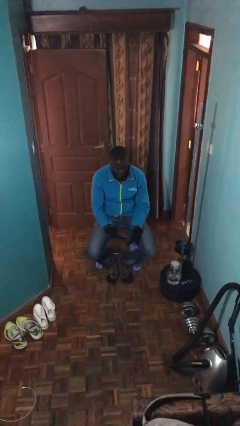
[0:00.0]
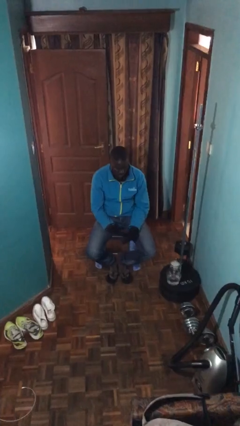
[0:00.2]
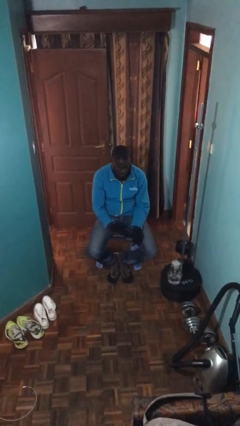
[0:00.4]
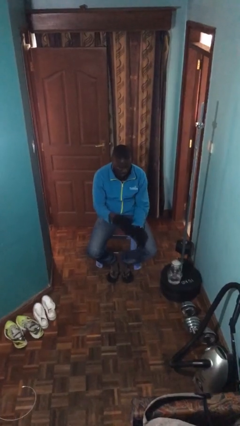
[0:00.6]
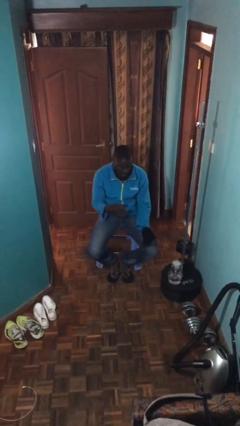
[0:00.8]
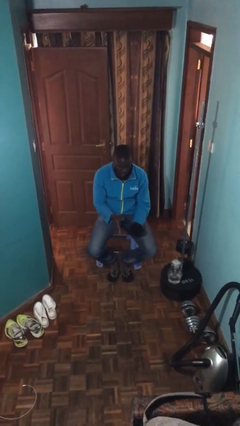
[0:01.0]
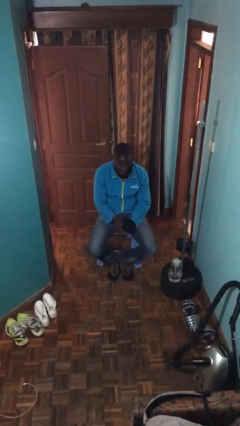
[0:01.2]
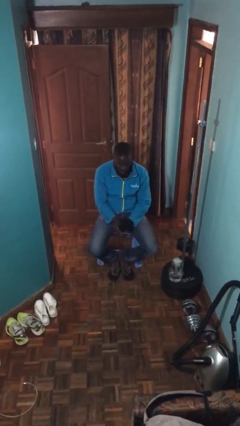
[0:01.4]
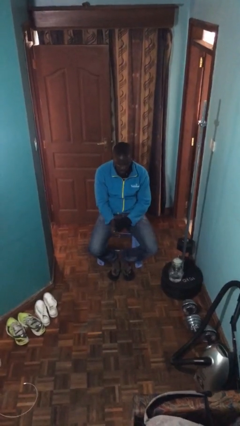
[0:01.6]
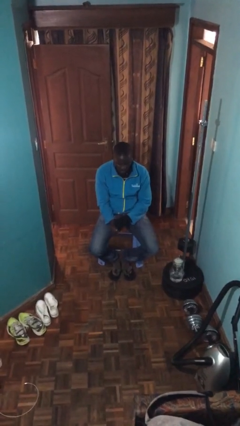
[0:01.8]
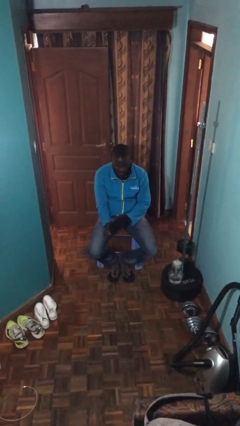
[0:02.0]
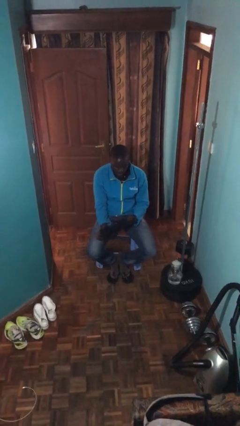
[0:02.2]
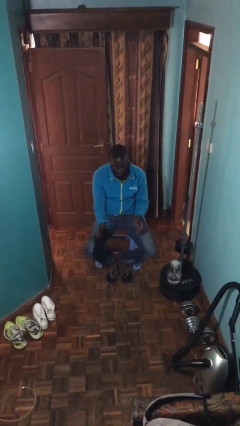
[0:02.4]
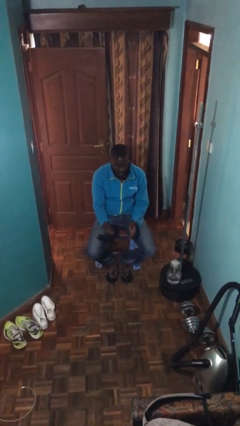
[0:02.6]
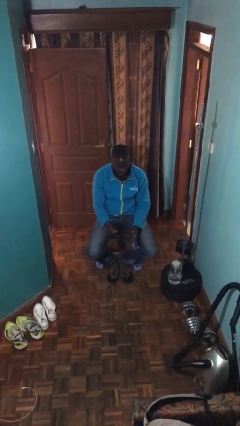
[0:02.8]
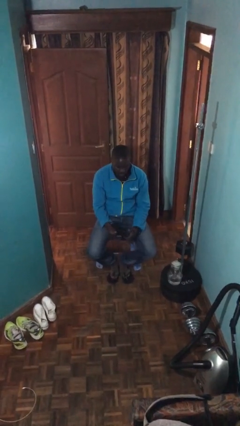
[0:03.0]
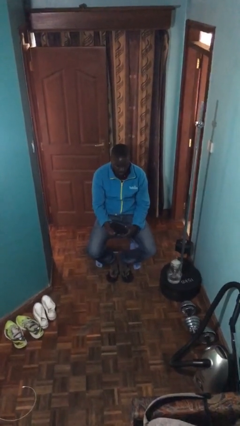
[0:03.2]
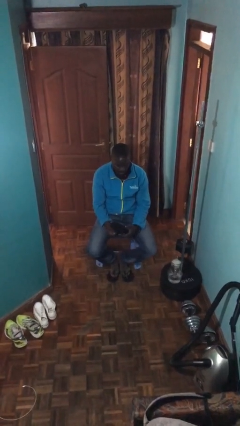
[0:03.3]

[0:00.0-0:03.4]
person takes off gloves

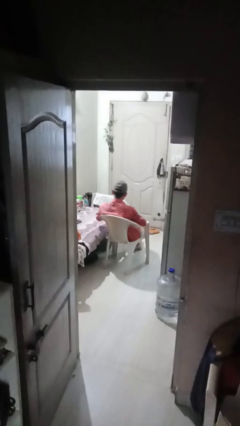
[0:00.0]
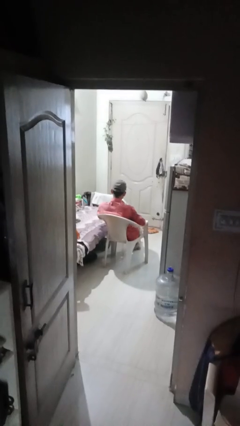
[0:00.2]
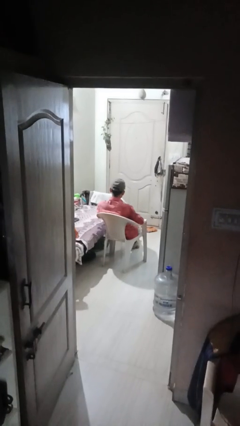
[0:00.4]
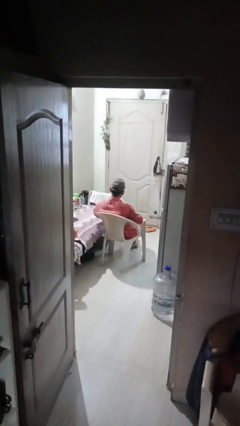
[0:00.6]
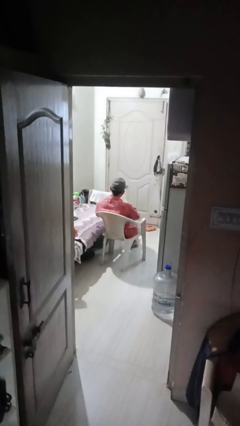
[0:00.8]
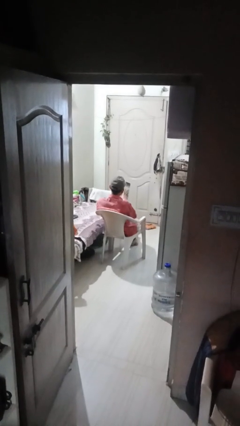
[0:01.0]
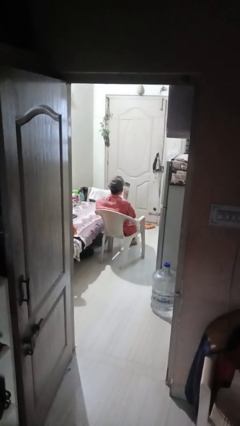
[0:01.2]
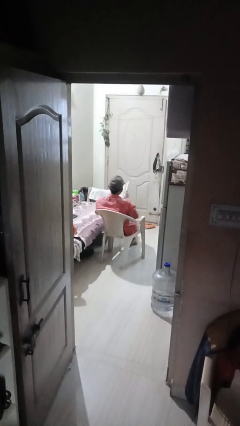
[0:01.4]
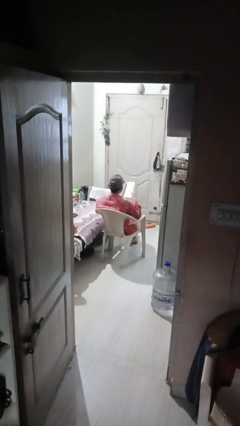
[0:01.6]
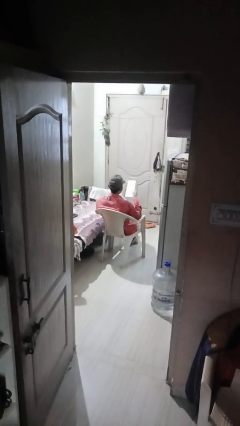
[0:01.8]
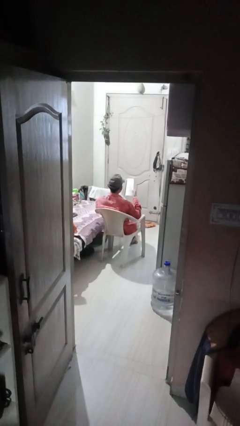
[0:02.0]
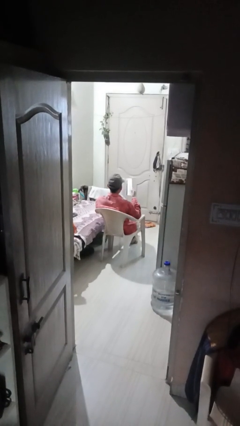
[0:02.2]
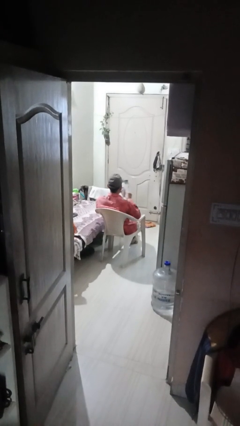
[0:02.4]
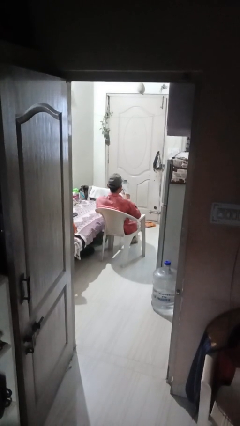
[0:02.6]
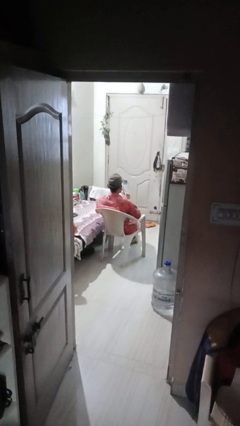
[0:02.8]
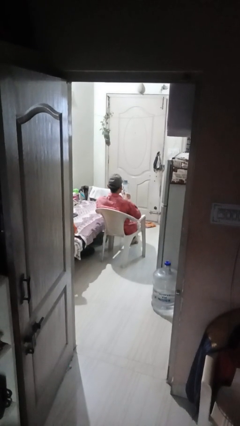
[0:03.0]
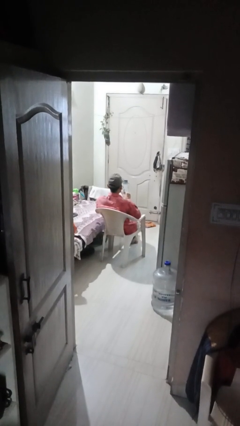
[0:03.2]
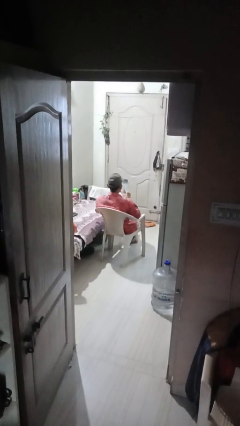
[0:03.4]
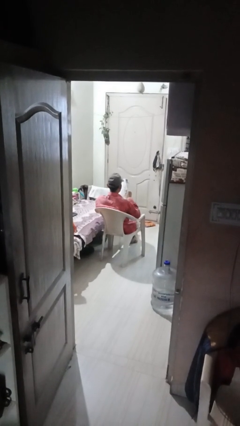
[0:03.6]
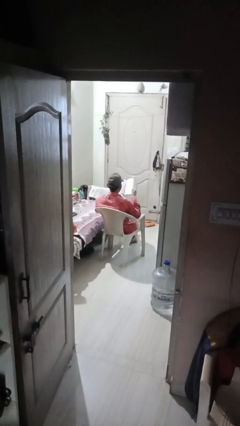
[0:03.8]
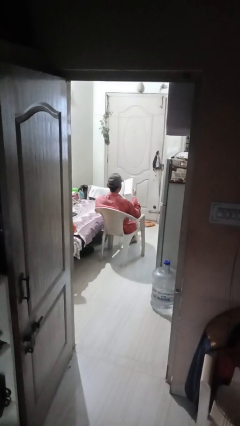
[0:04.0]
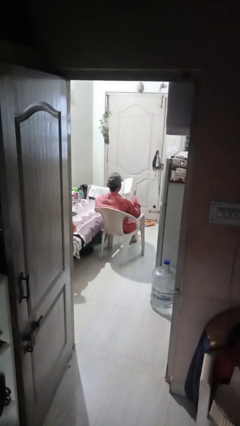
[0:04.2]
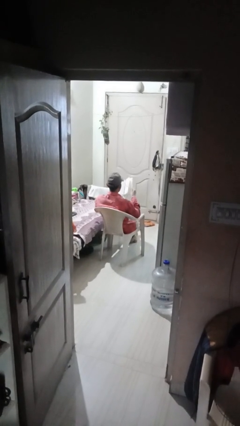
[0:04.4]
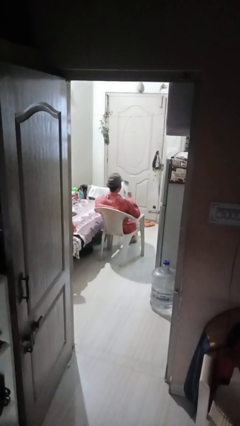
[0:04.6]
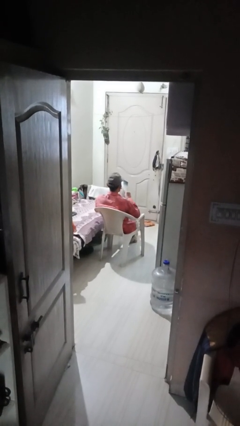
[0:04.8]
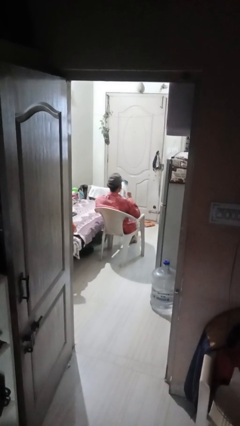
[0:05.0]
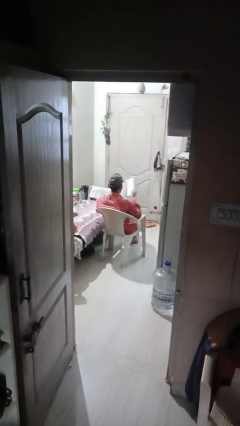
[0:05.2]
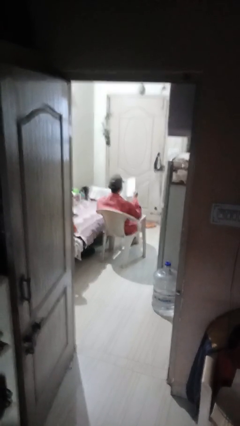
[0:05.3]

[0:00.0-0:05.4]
person reads book

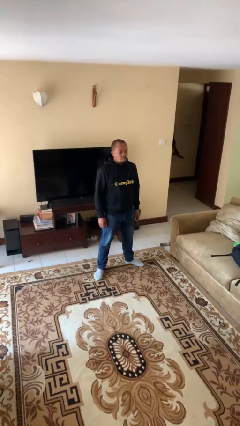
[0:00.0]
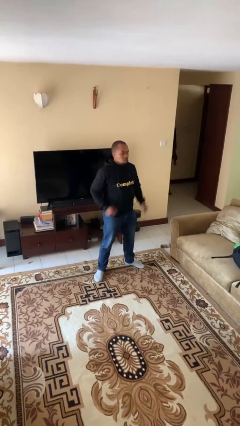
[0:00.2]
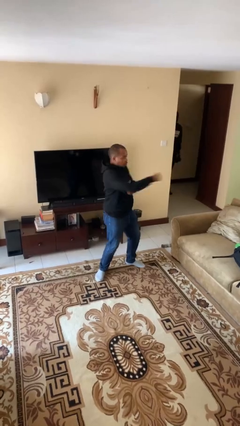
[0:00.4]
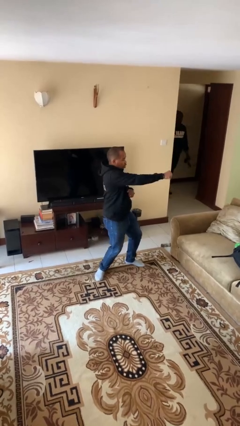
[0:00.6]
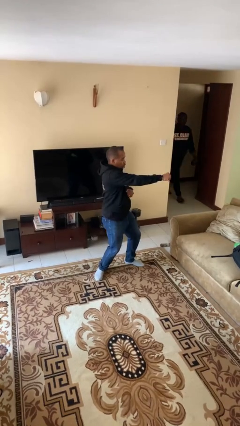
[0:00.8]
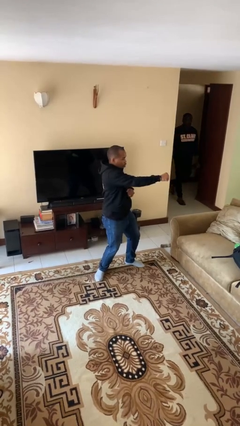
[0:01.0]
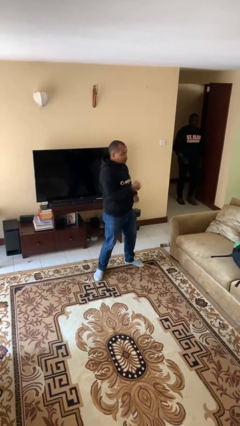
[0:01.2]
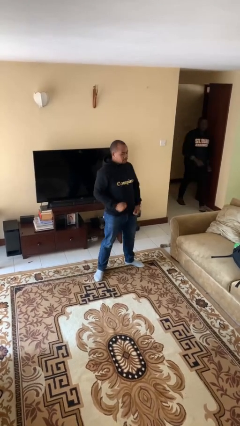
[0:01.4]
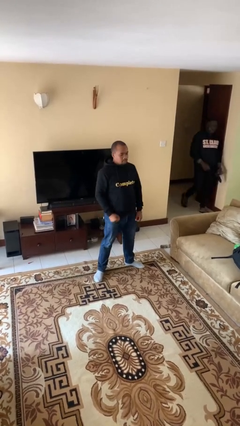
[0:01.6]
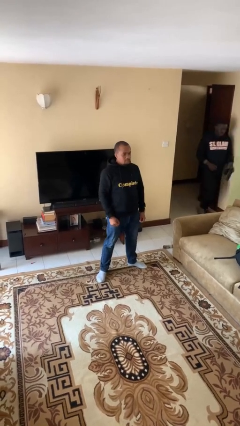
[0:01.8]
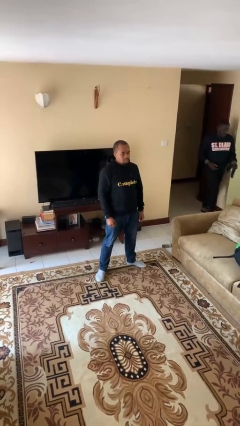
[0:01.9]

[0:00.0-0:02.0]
person punches

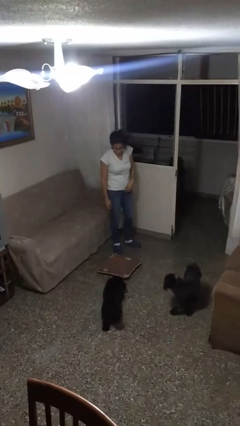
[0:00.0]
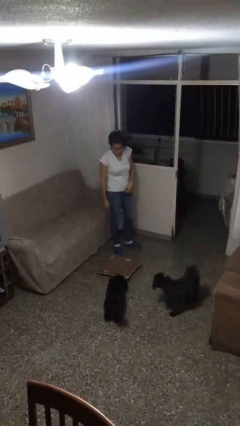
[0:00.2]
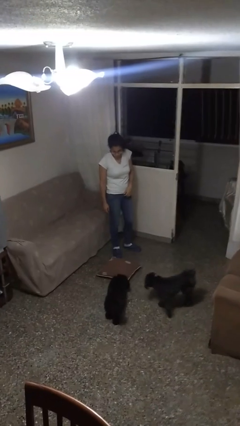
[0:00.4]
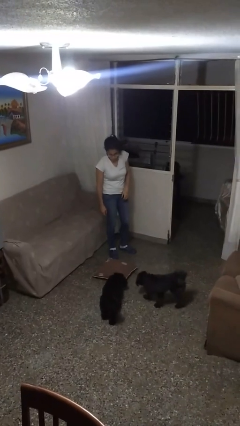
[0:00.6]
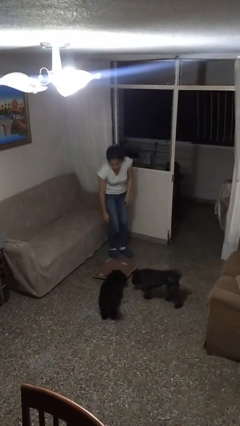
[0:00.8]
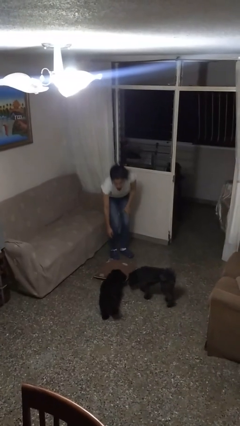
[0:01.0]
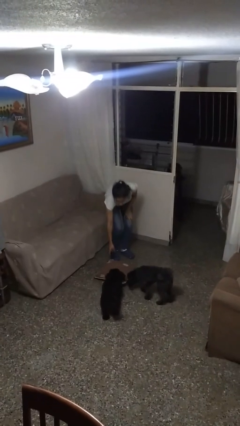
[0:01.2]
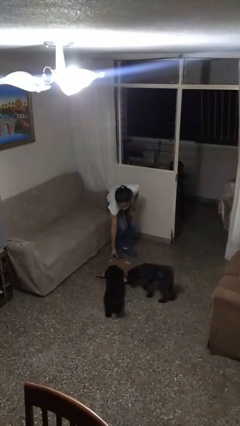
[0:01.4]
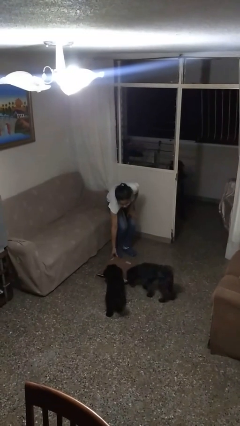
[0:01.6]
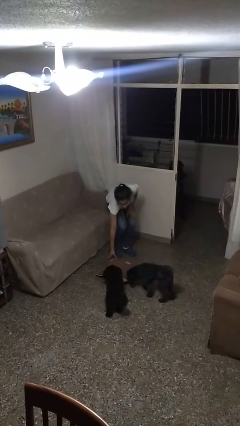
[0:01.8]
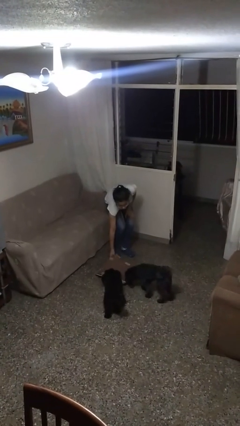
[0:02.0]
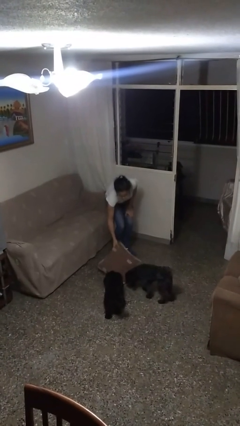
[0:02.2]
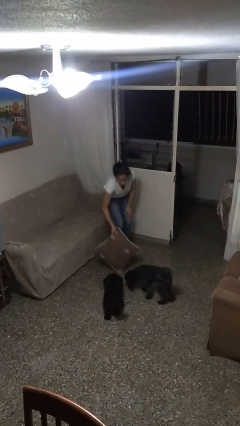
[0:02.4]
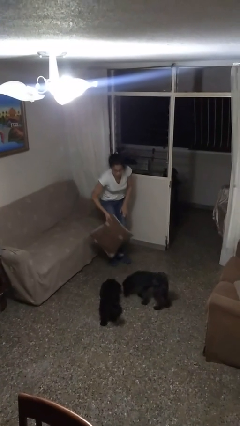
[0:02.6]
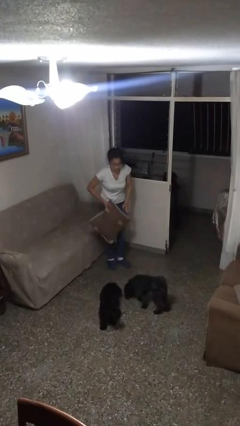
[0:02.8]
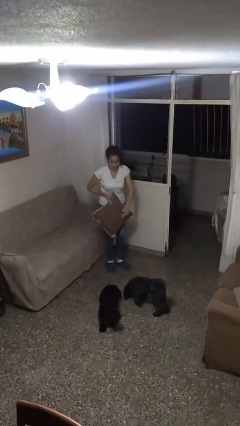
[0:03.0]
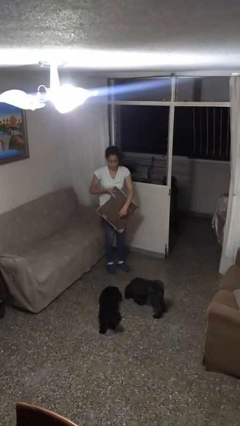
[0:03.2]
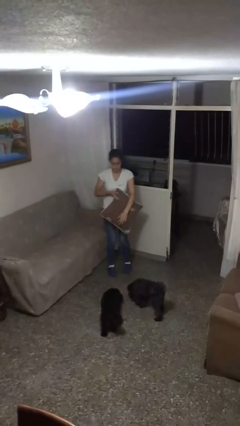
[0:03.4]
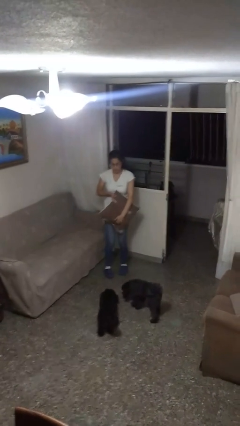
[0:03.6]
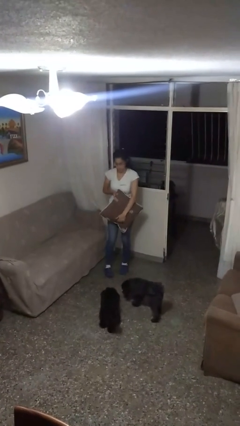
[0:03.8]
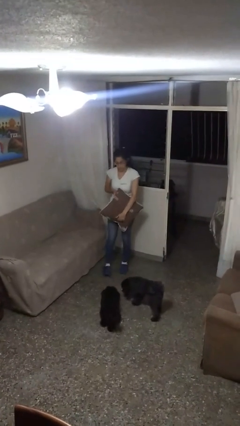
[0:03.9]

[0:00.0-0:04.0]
person picks up object from floor

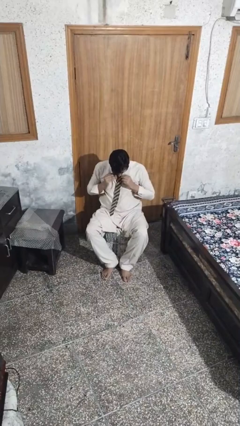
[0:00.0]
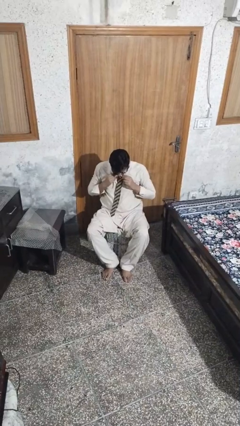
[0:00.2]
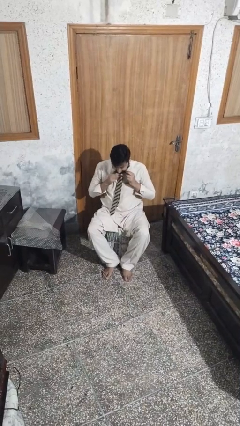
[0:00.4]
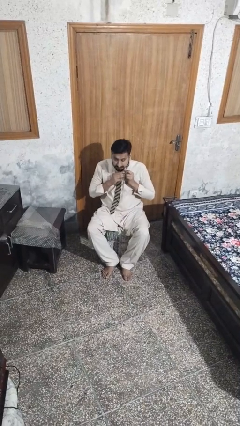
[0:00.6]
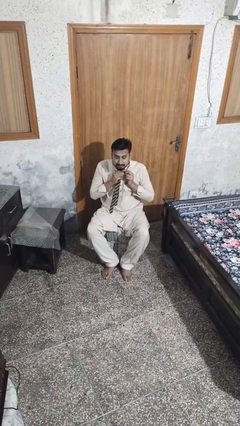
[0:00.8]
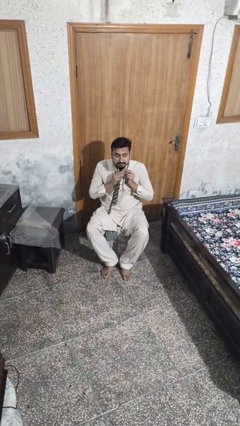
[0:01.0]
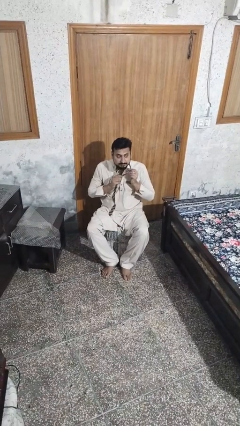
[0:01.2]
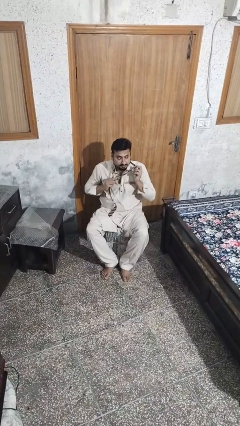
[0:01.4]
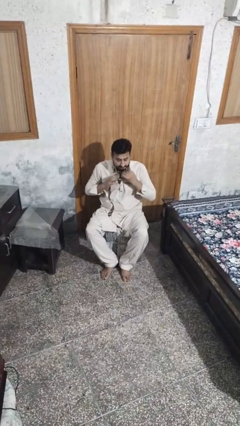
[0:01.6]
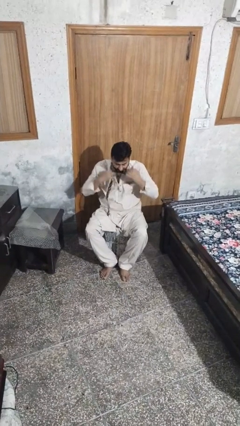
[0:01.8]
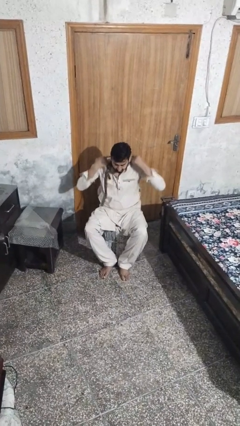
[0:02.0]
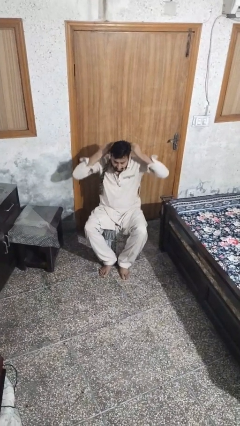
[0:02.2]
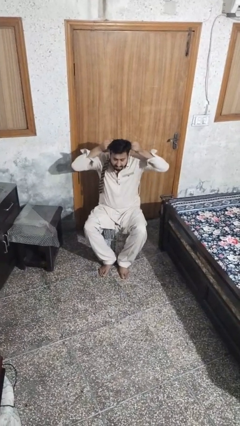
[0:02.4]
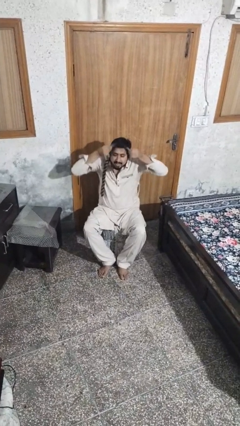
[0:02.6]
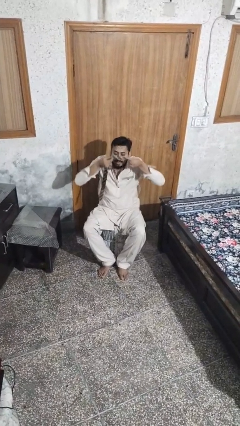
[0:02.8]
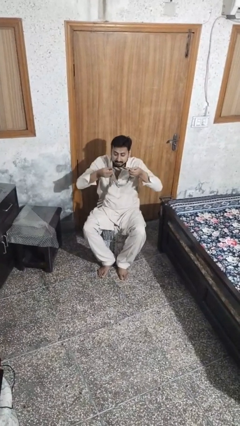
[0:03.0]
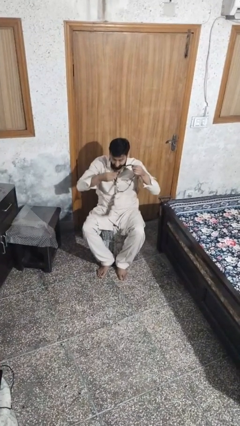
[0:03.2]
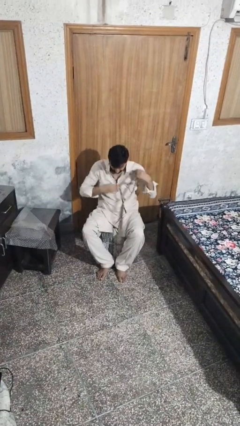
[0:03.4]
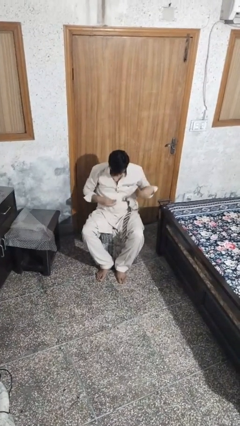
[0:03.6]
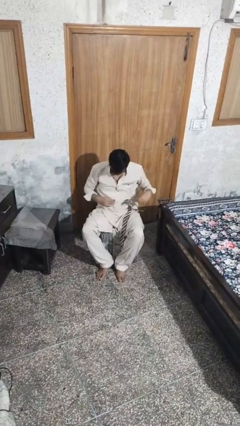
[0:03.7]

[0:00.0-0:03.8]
person takes off necktie
